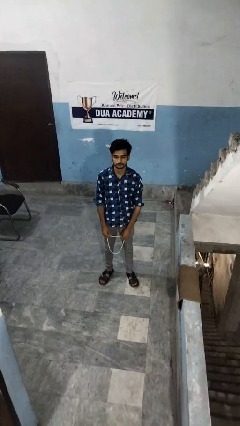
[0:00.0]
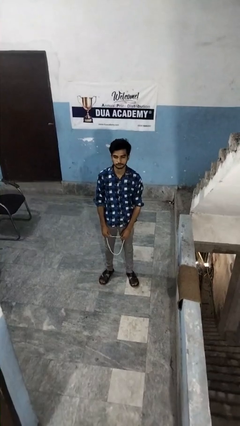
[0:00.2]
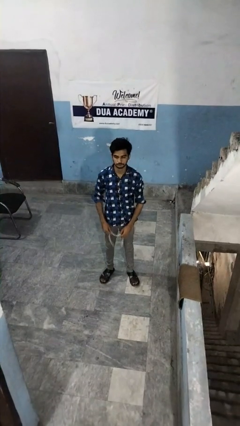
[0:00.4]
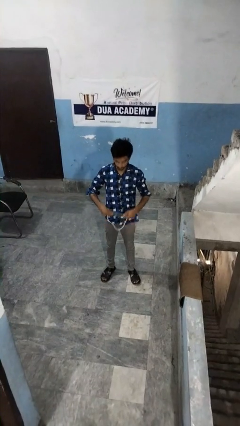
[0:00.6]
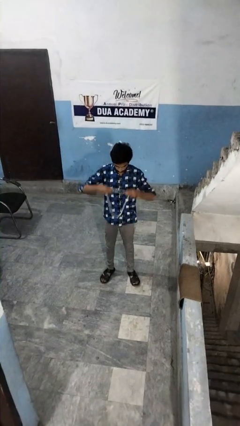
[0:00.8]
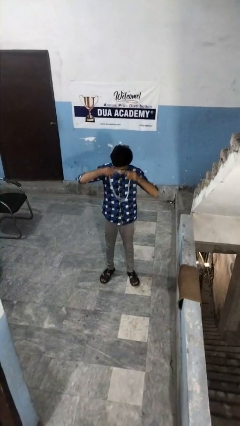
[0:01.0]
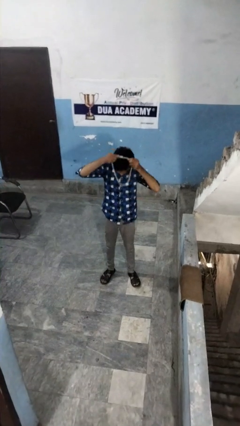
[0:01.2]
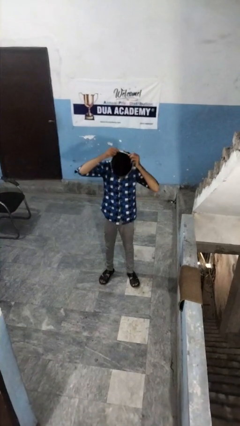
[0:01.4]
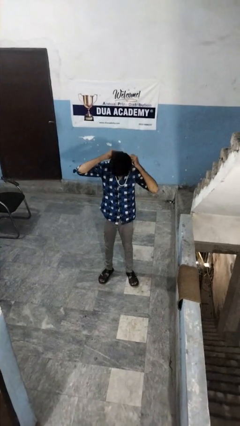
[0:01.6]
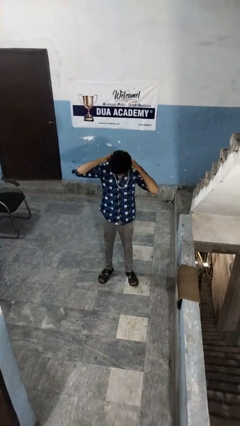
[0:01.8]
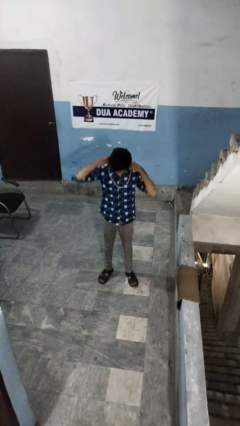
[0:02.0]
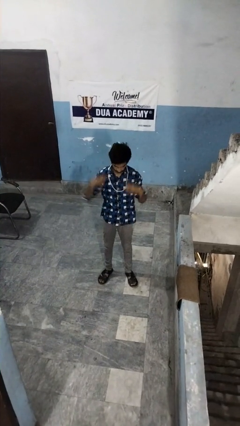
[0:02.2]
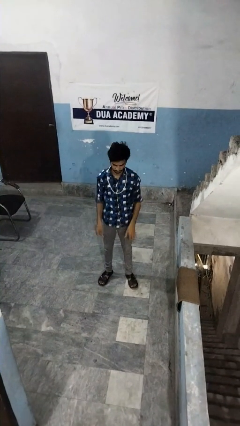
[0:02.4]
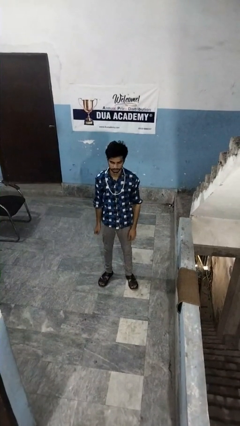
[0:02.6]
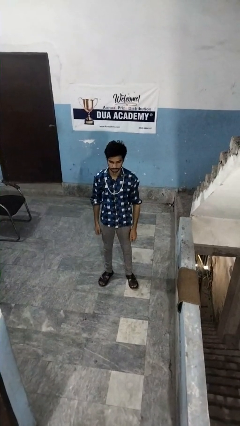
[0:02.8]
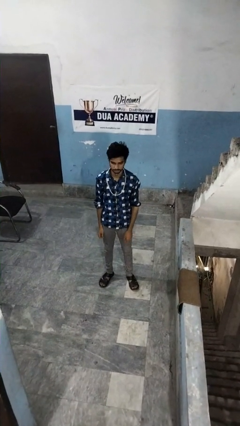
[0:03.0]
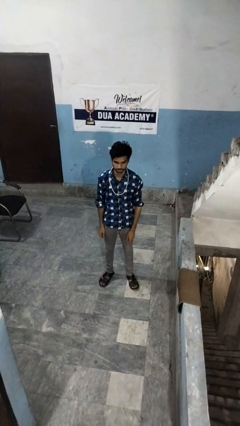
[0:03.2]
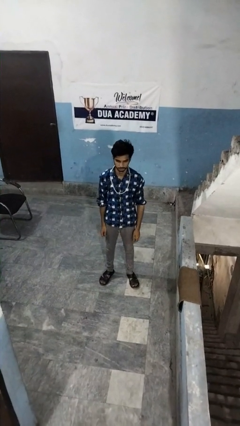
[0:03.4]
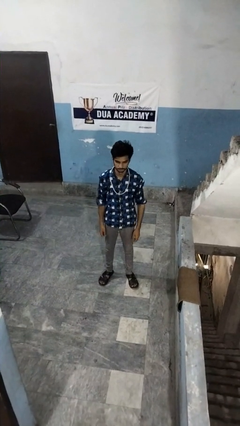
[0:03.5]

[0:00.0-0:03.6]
person puts on necklace

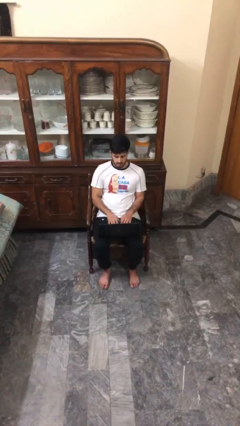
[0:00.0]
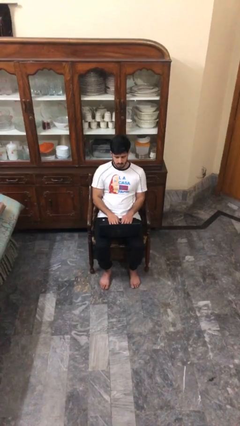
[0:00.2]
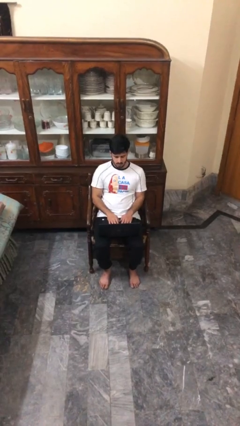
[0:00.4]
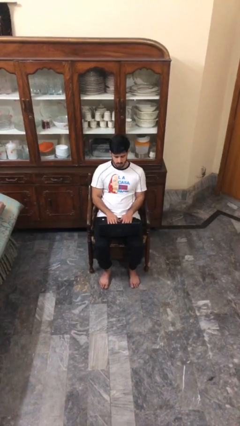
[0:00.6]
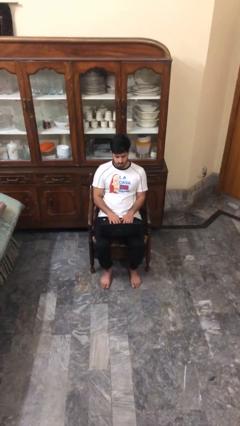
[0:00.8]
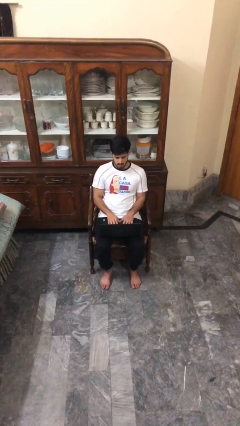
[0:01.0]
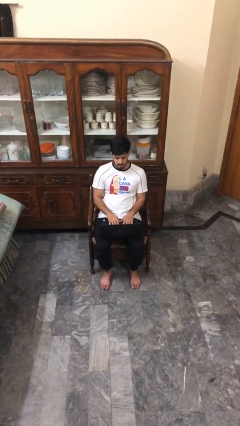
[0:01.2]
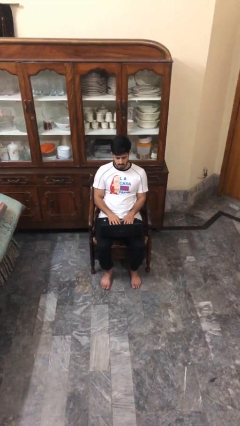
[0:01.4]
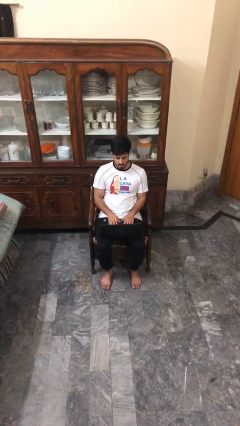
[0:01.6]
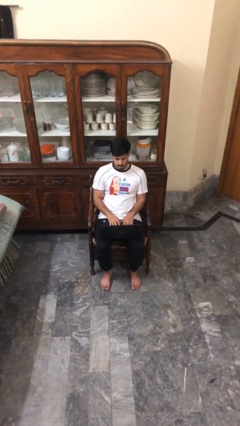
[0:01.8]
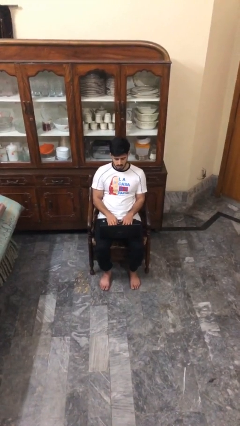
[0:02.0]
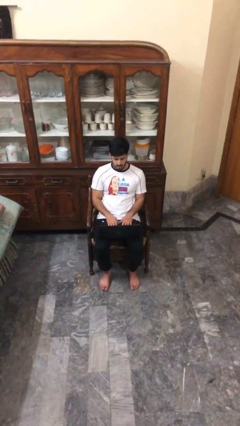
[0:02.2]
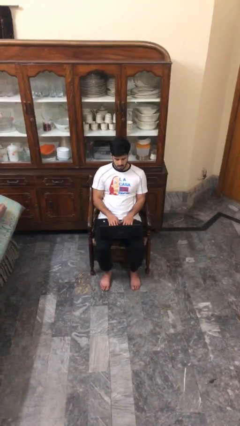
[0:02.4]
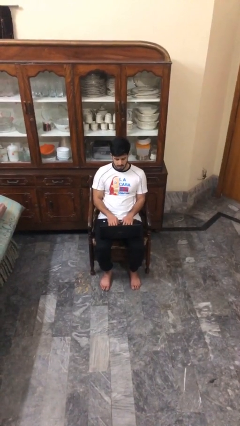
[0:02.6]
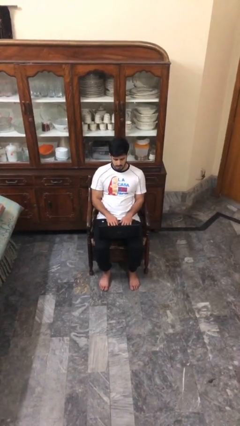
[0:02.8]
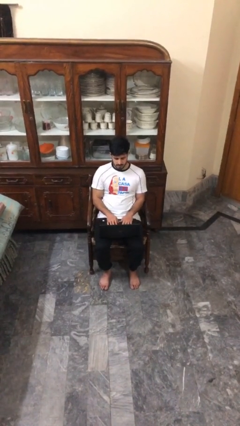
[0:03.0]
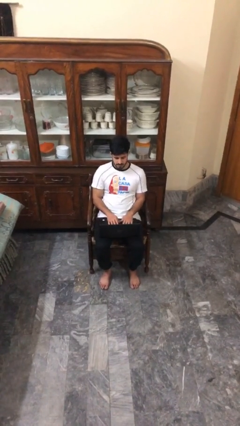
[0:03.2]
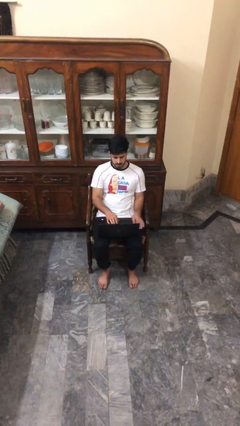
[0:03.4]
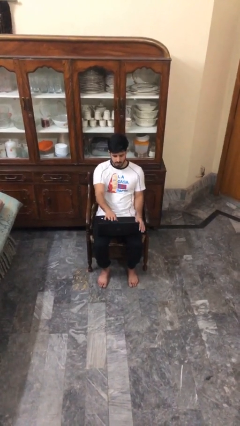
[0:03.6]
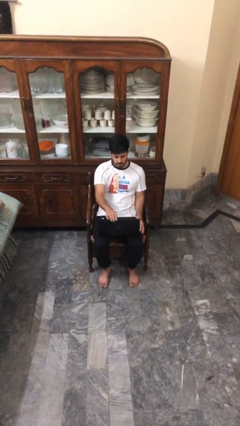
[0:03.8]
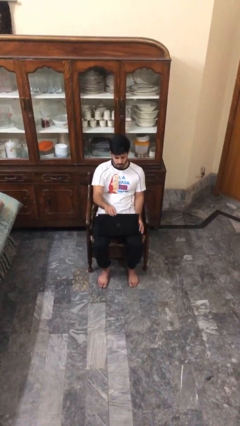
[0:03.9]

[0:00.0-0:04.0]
person interacts with laptop

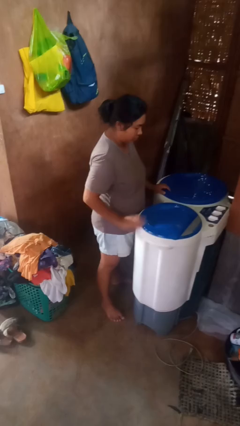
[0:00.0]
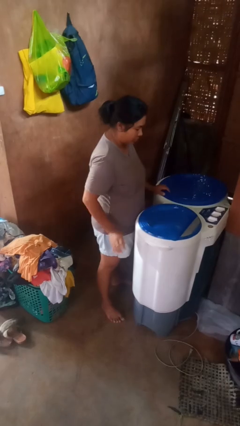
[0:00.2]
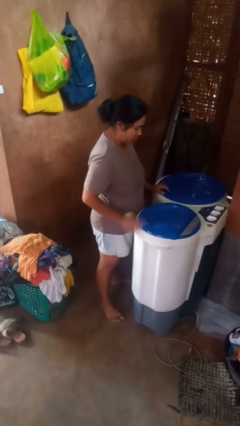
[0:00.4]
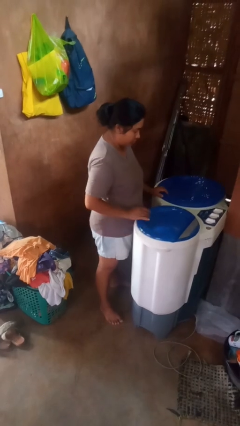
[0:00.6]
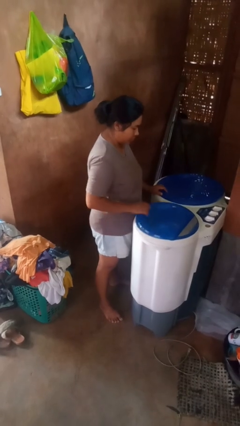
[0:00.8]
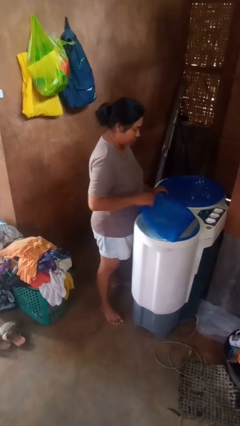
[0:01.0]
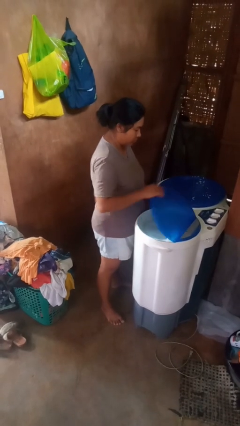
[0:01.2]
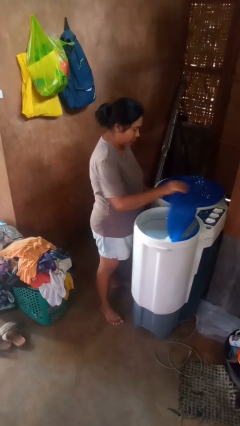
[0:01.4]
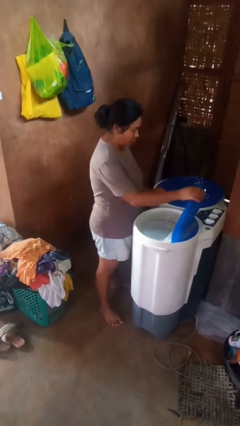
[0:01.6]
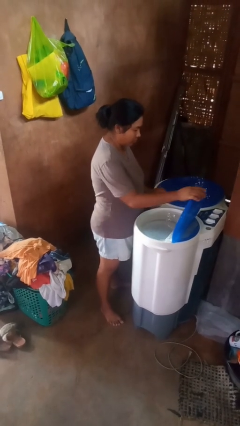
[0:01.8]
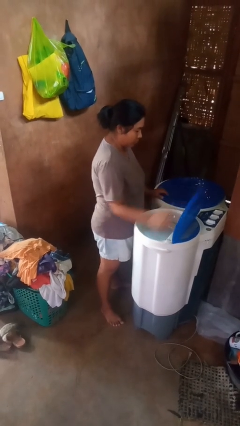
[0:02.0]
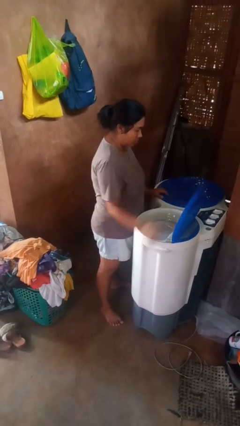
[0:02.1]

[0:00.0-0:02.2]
person opens clothes washer

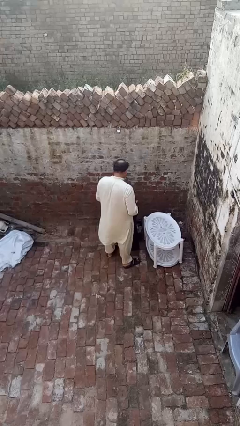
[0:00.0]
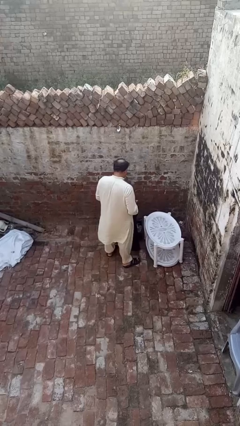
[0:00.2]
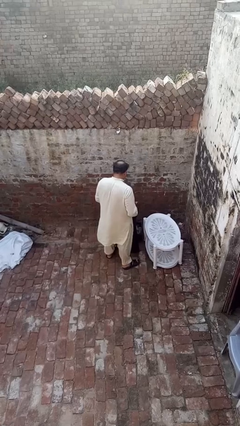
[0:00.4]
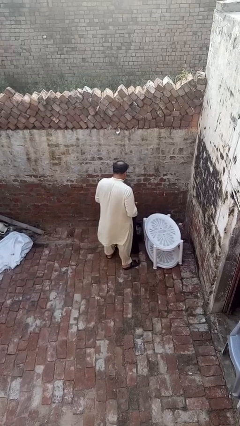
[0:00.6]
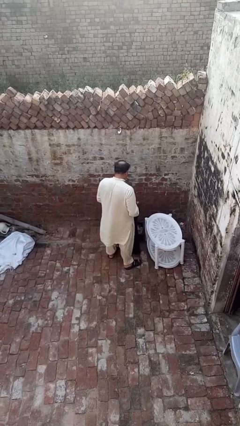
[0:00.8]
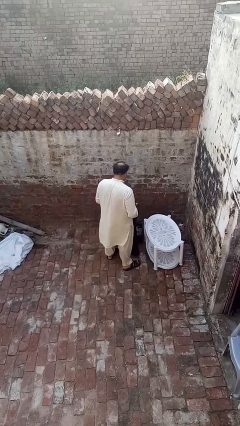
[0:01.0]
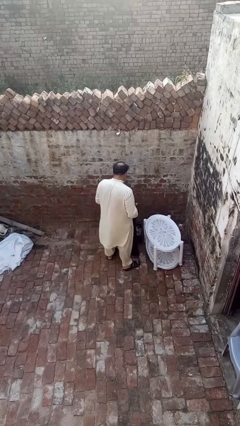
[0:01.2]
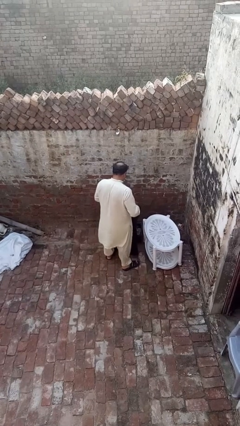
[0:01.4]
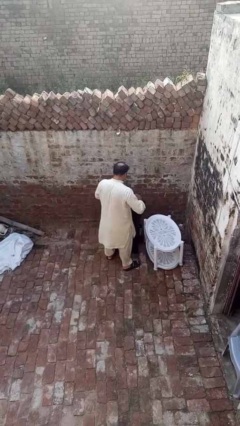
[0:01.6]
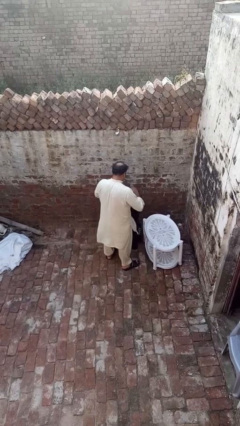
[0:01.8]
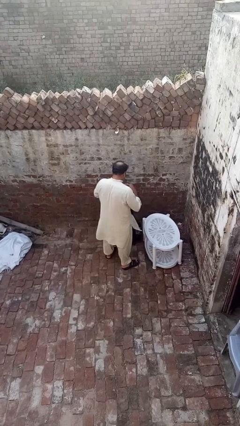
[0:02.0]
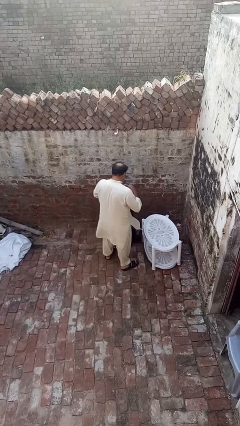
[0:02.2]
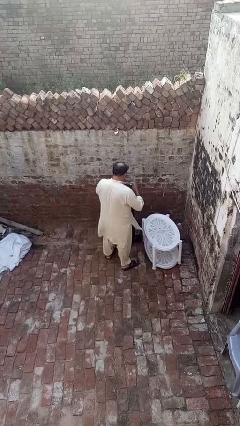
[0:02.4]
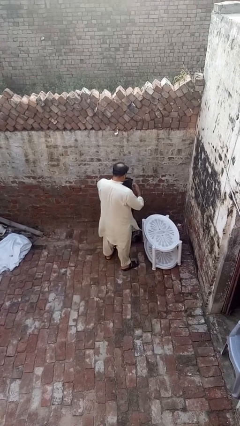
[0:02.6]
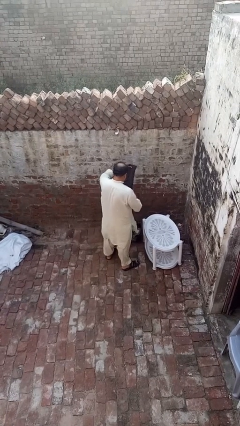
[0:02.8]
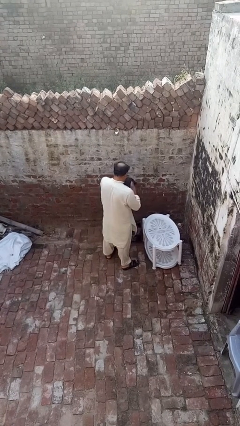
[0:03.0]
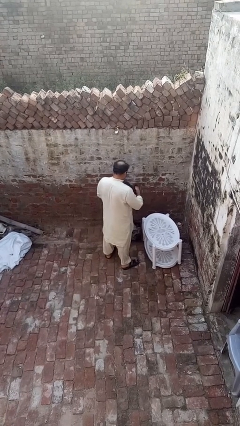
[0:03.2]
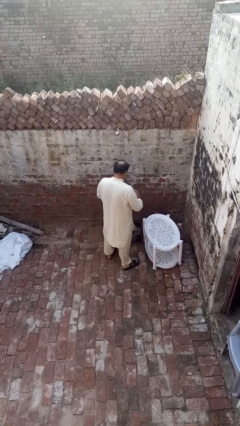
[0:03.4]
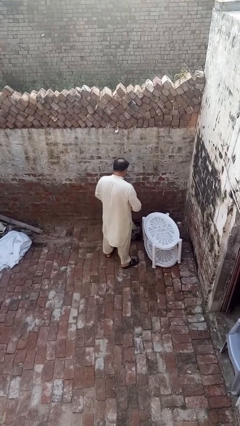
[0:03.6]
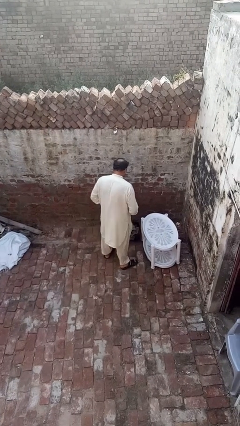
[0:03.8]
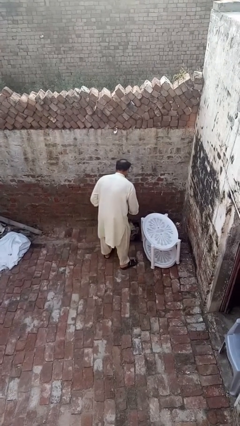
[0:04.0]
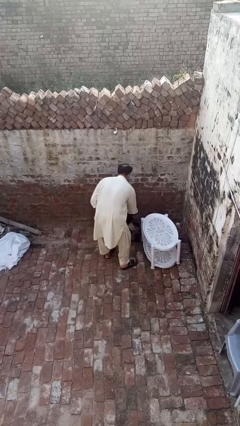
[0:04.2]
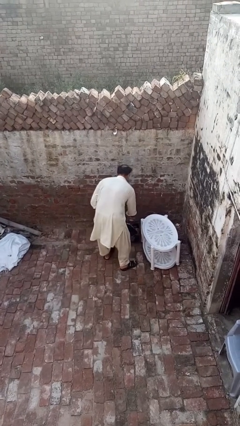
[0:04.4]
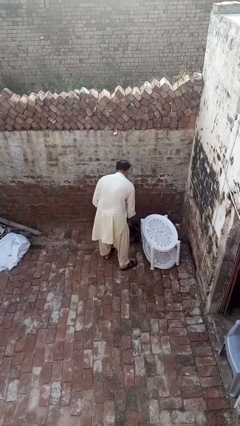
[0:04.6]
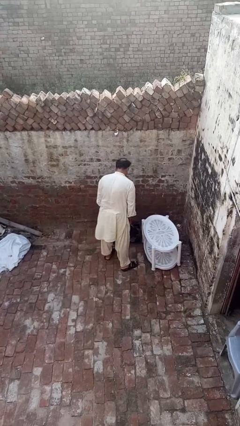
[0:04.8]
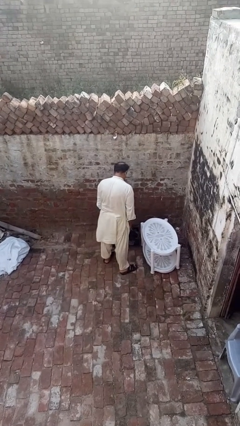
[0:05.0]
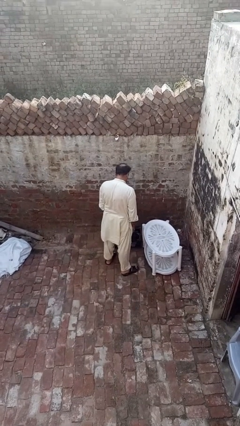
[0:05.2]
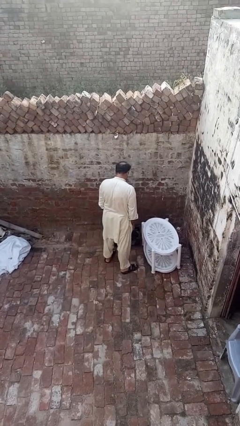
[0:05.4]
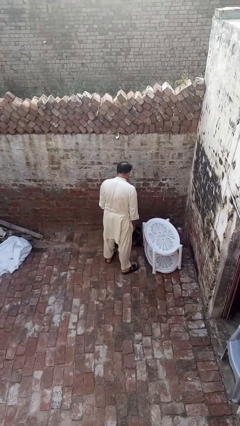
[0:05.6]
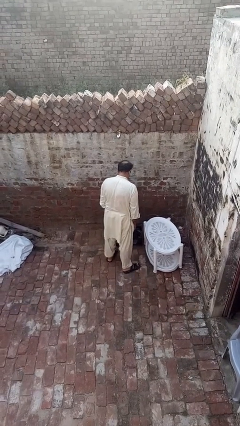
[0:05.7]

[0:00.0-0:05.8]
person folds pants

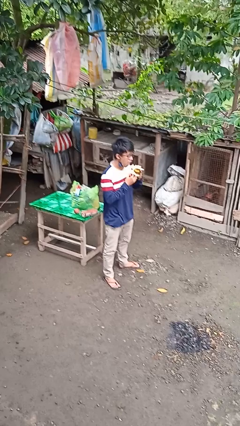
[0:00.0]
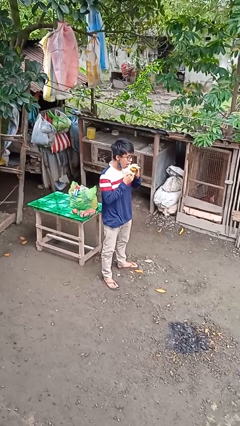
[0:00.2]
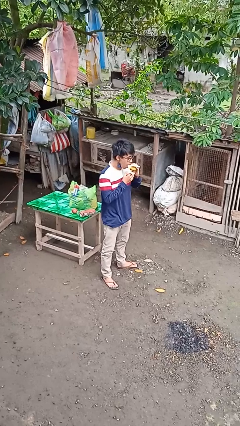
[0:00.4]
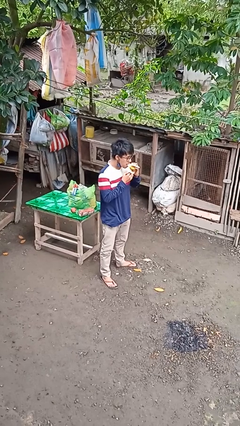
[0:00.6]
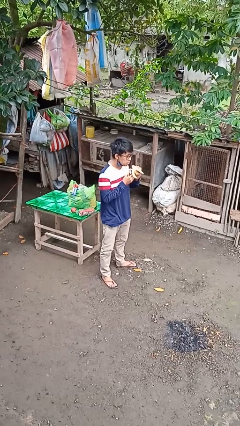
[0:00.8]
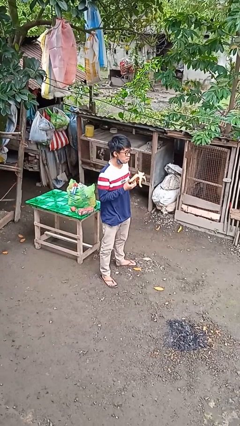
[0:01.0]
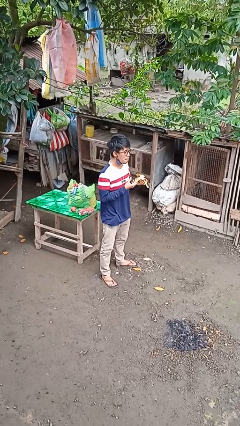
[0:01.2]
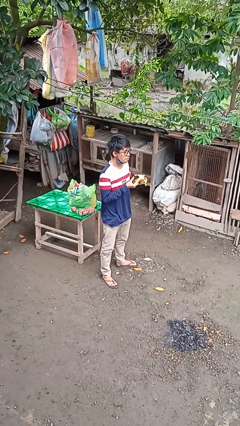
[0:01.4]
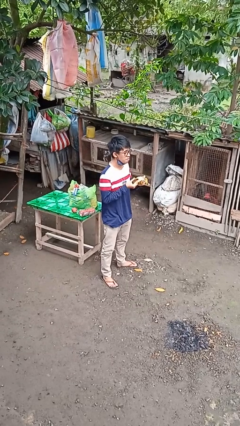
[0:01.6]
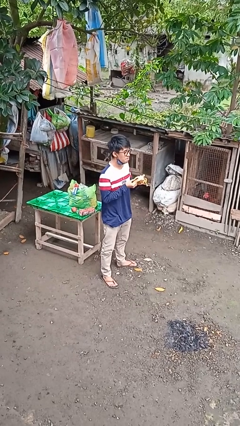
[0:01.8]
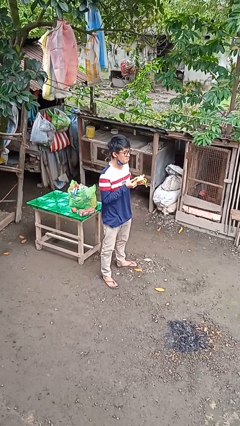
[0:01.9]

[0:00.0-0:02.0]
person eats banana
